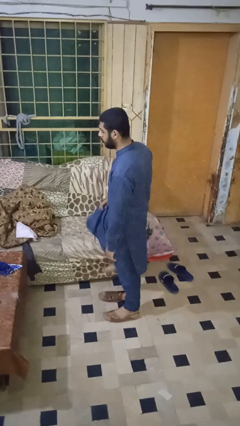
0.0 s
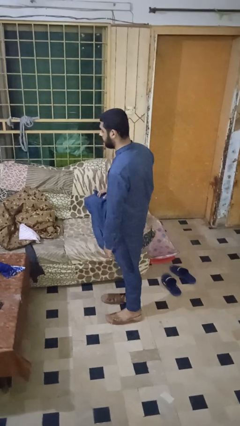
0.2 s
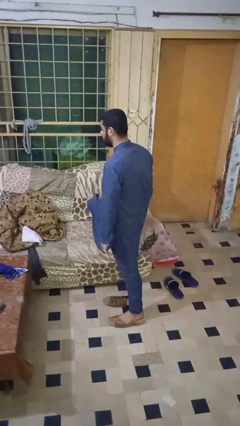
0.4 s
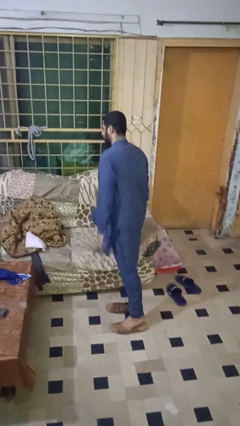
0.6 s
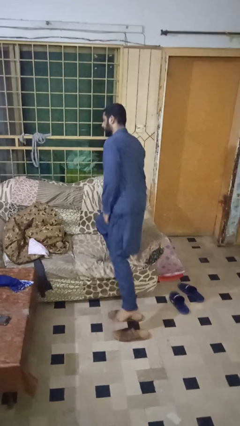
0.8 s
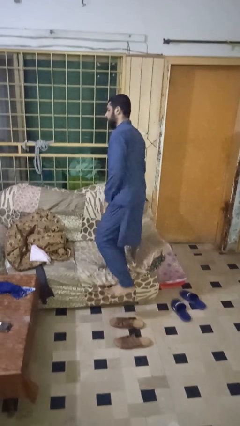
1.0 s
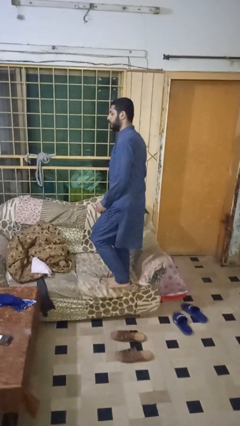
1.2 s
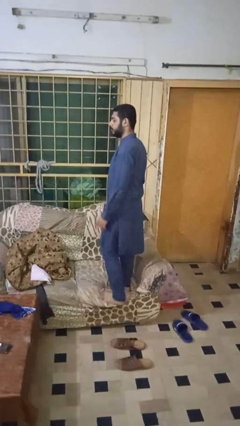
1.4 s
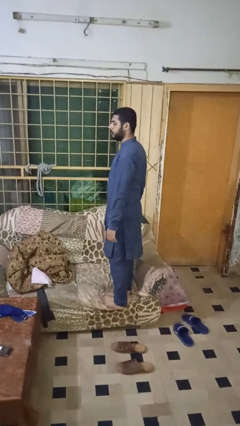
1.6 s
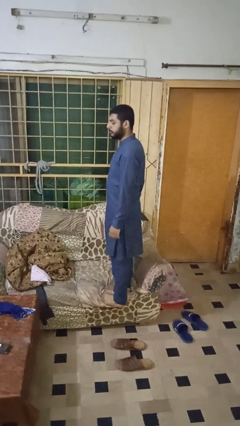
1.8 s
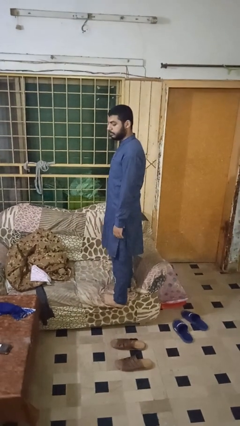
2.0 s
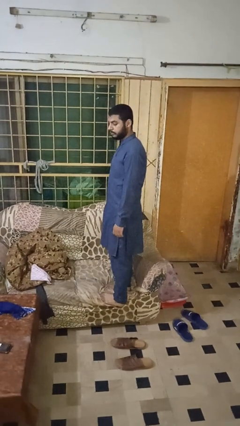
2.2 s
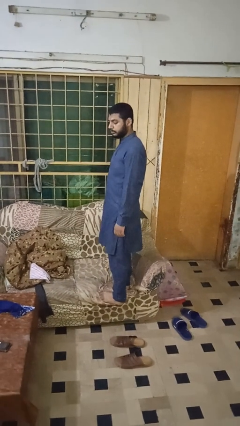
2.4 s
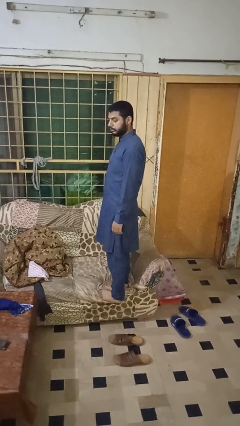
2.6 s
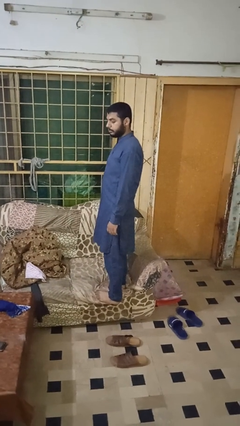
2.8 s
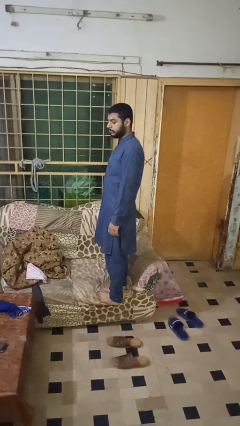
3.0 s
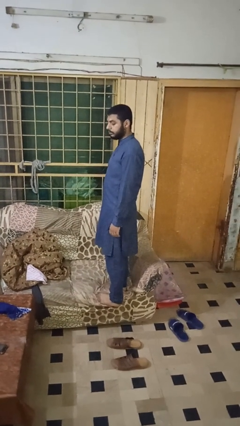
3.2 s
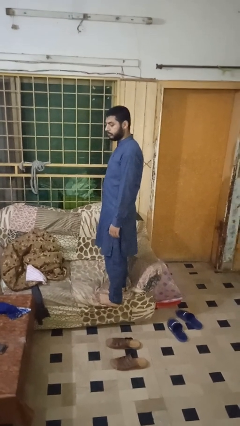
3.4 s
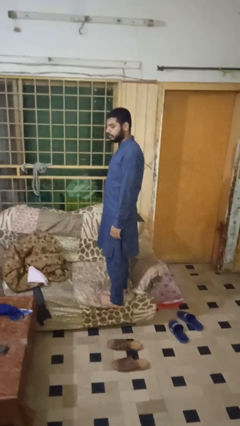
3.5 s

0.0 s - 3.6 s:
person climbs on couch

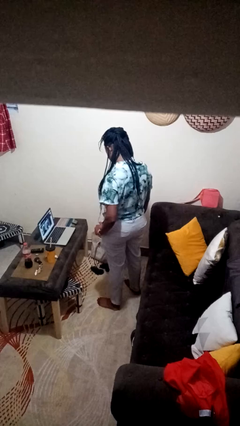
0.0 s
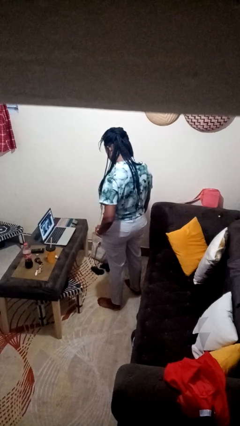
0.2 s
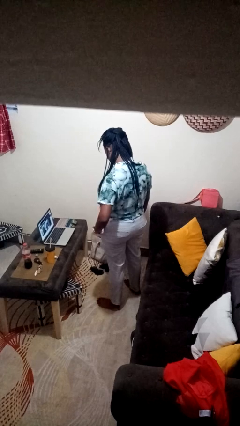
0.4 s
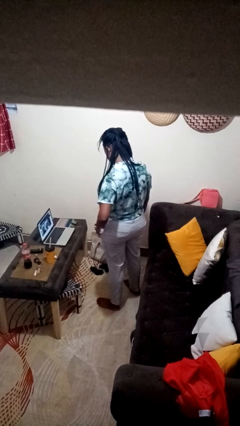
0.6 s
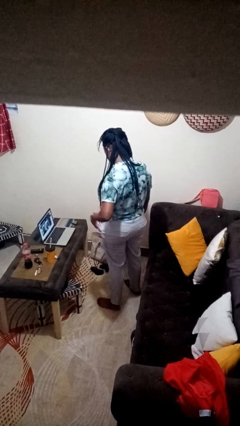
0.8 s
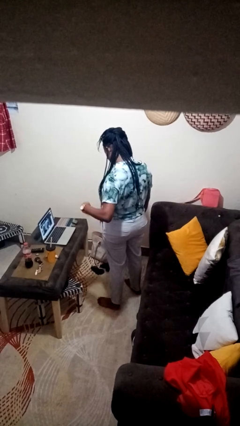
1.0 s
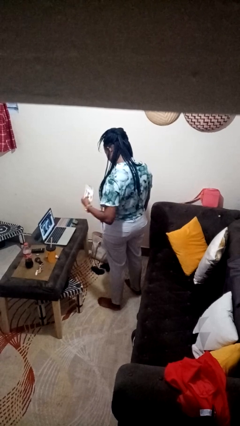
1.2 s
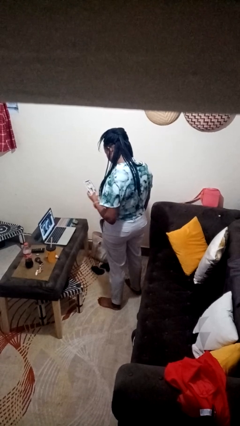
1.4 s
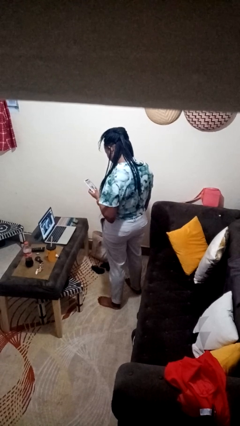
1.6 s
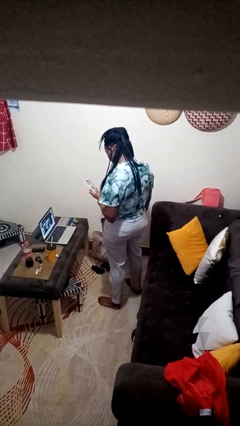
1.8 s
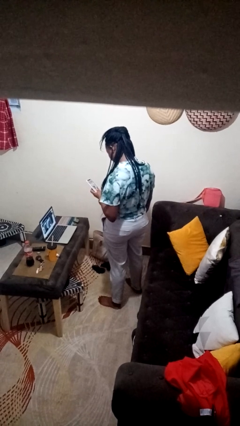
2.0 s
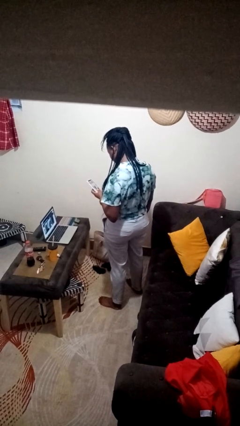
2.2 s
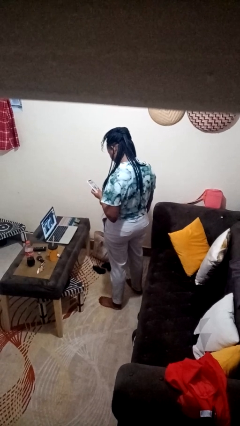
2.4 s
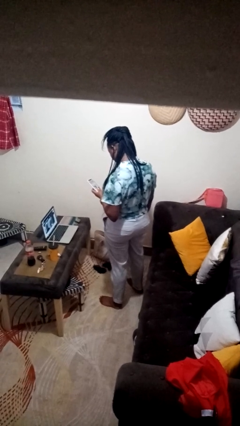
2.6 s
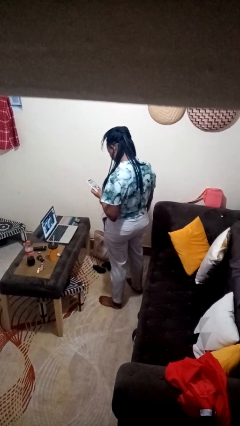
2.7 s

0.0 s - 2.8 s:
person takes phone from pocket

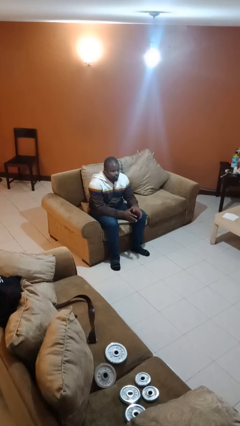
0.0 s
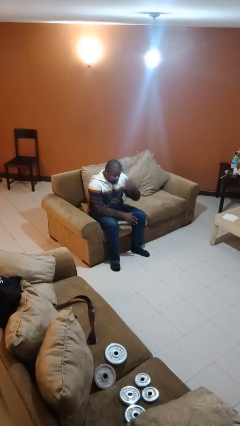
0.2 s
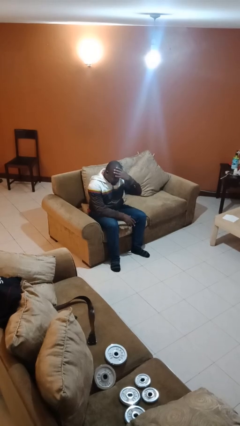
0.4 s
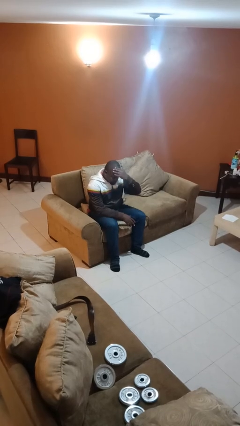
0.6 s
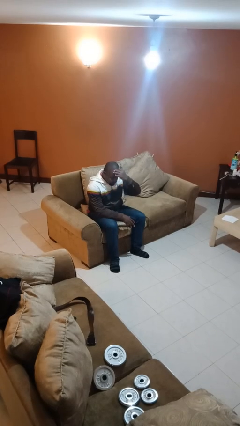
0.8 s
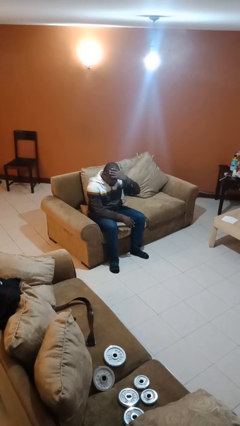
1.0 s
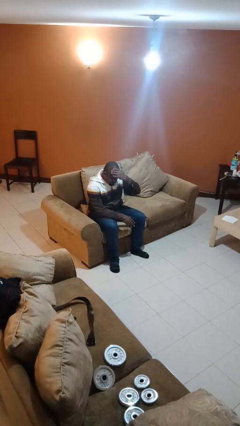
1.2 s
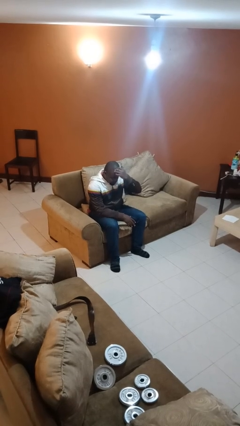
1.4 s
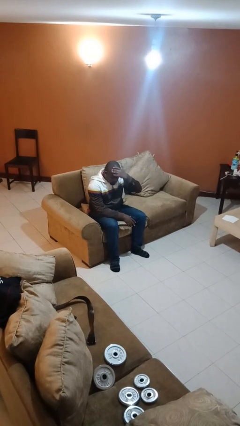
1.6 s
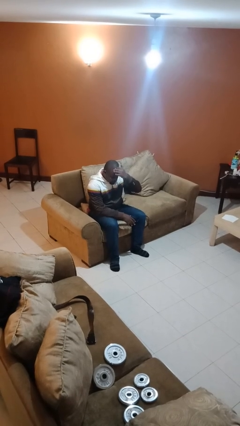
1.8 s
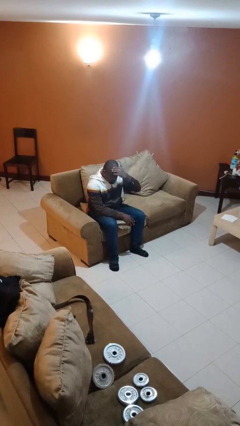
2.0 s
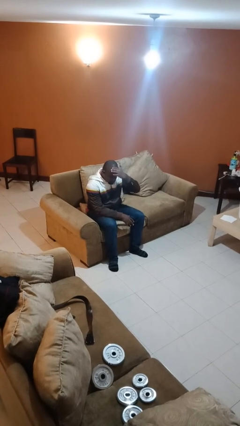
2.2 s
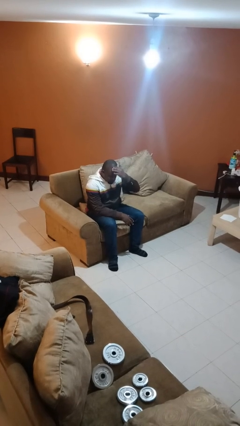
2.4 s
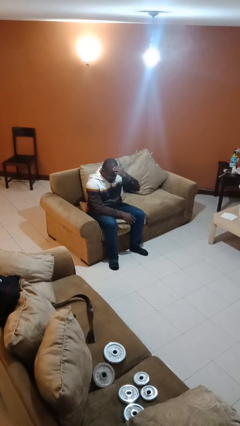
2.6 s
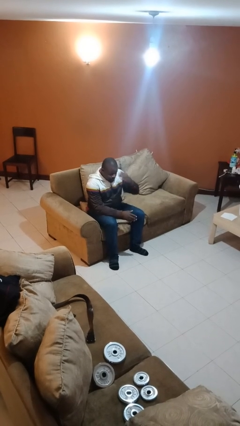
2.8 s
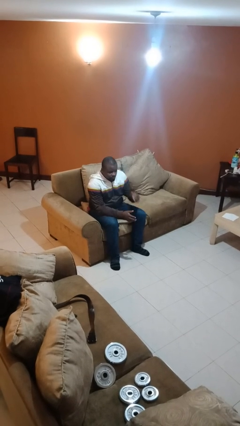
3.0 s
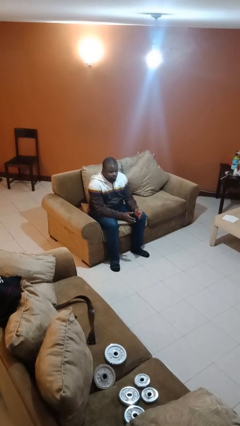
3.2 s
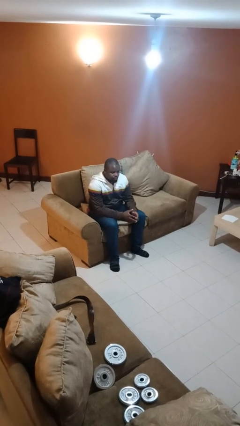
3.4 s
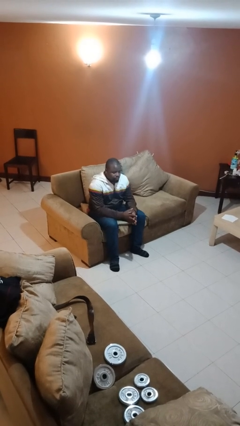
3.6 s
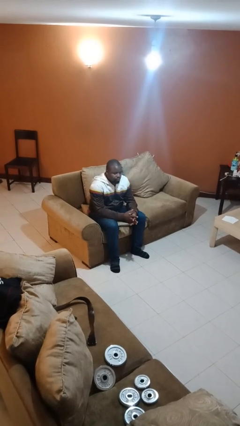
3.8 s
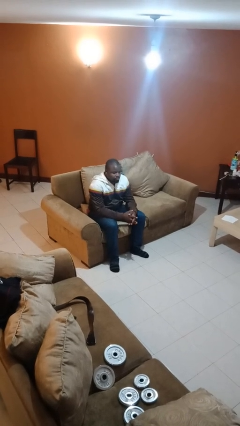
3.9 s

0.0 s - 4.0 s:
person scratches face

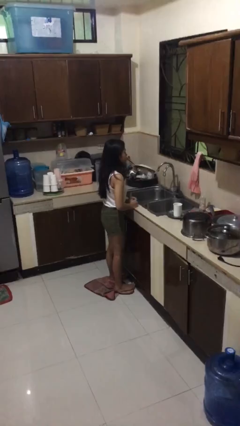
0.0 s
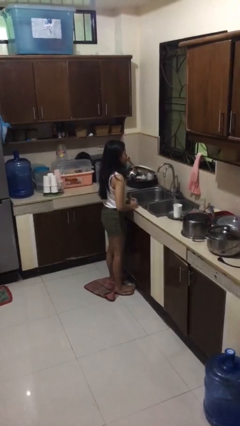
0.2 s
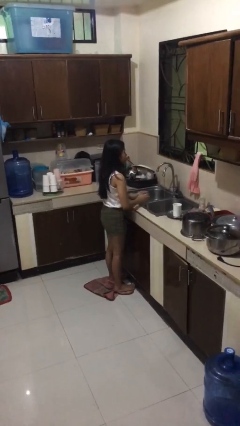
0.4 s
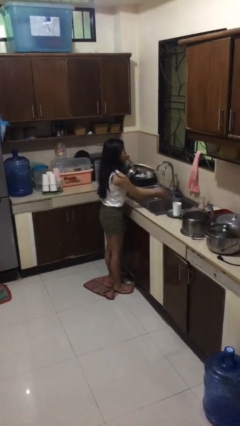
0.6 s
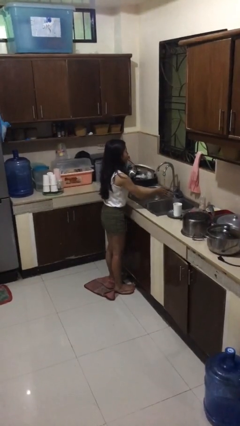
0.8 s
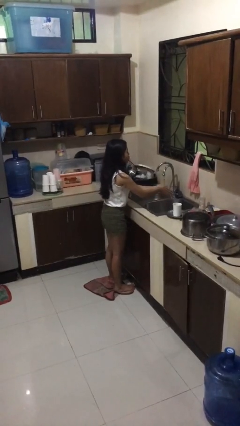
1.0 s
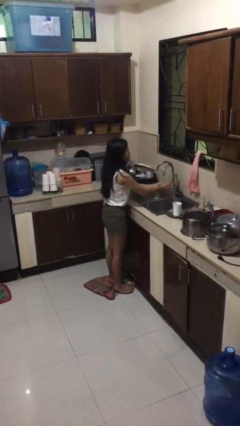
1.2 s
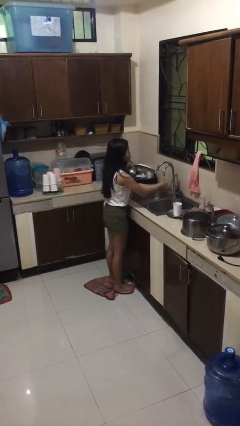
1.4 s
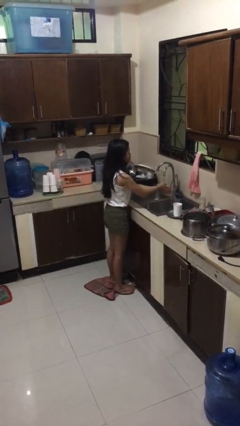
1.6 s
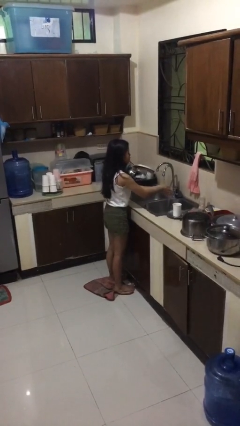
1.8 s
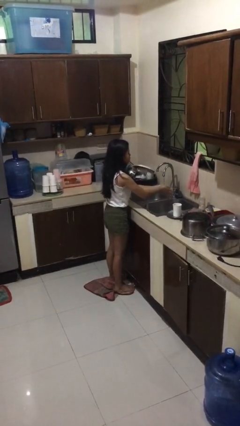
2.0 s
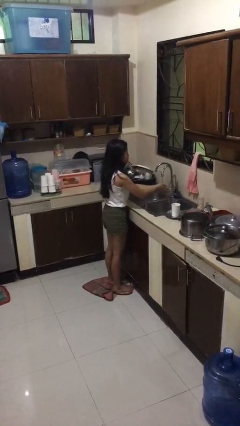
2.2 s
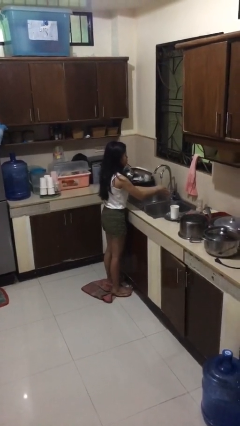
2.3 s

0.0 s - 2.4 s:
person washes hands

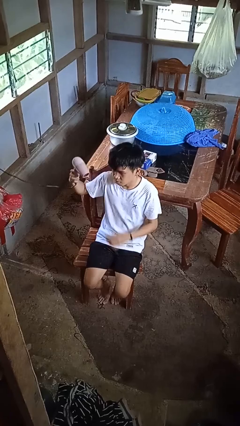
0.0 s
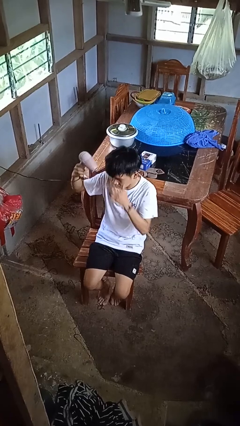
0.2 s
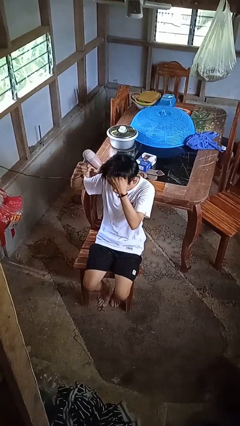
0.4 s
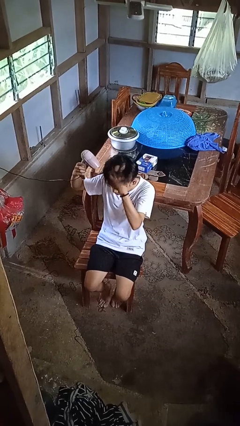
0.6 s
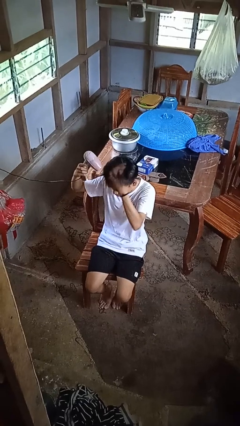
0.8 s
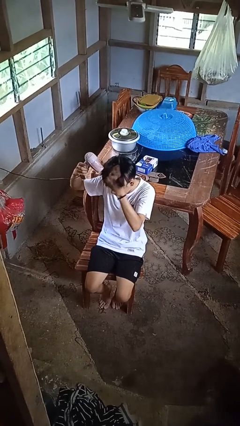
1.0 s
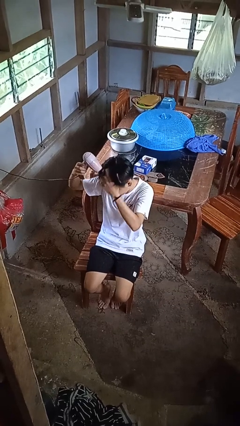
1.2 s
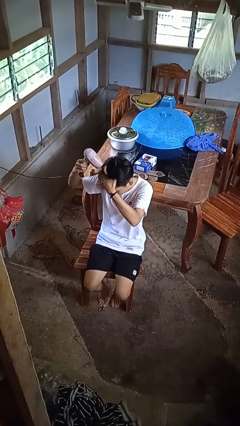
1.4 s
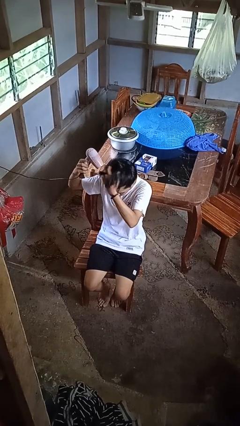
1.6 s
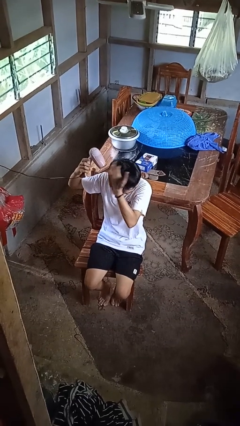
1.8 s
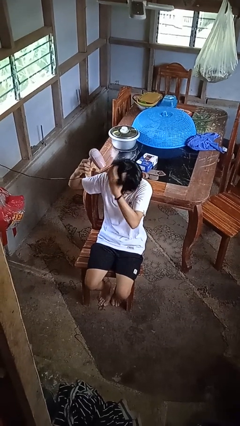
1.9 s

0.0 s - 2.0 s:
person dries hair with hairdryer

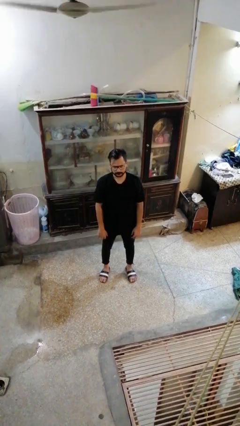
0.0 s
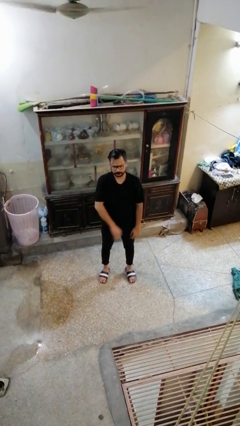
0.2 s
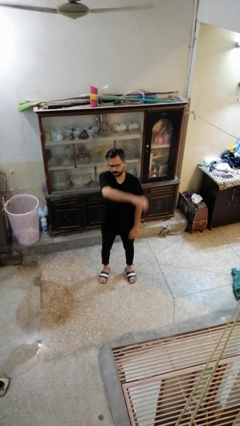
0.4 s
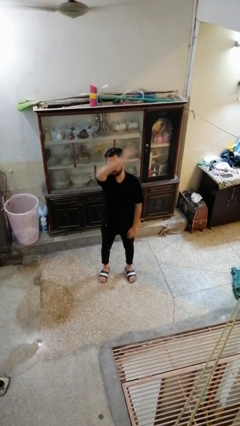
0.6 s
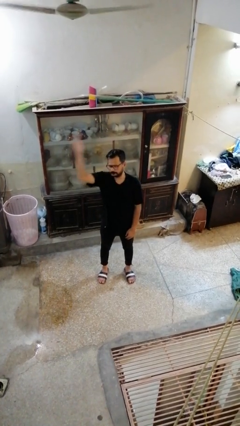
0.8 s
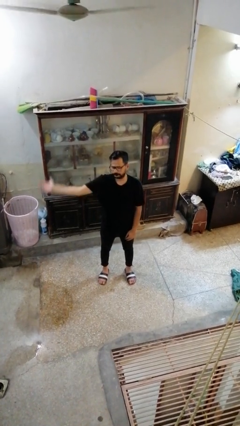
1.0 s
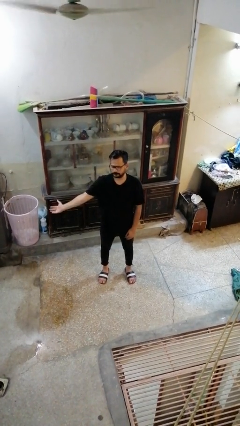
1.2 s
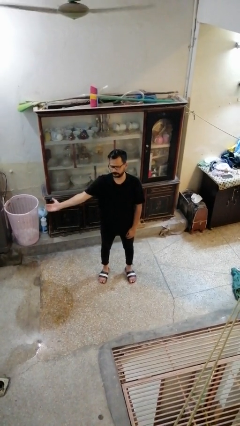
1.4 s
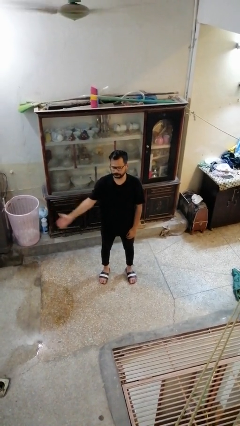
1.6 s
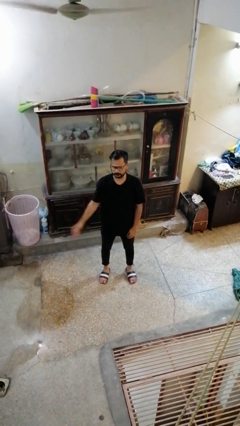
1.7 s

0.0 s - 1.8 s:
person gestures swipe right

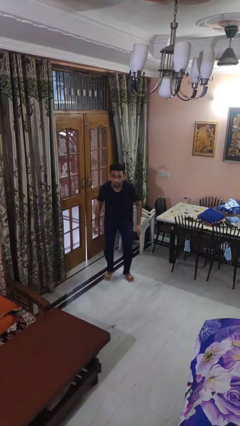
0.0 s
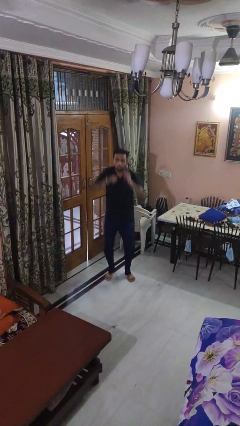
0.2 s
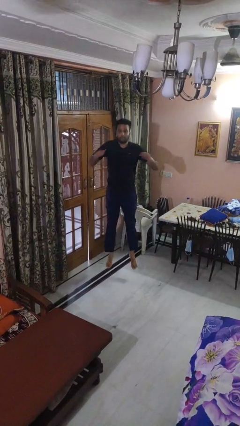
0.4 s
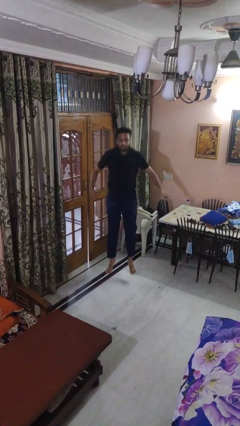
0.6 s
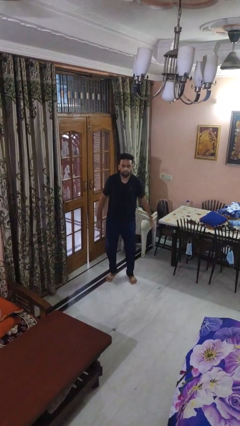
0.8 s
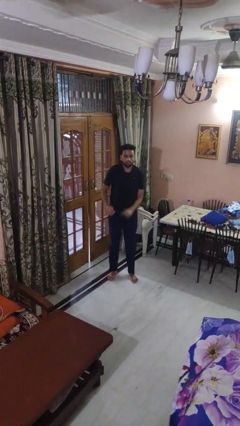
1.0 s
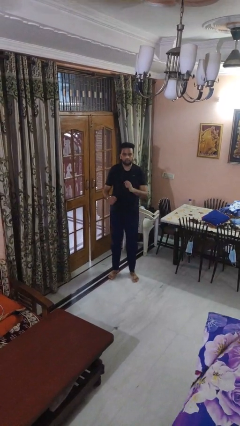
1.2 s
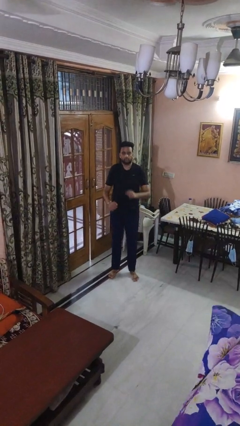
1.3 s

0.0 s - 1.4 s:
person jumps
